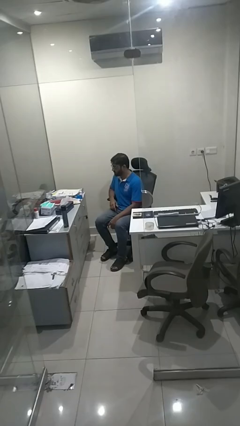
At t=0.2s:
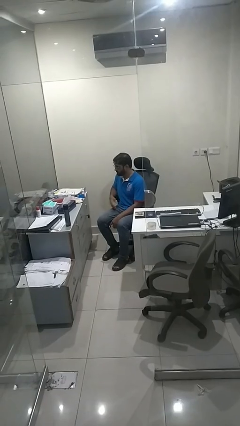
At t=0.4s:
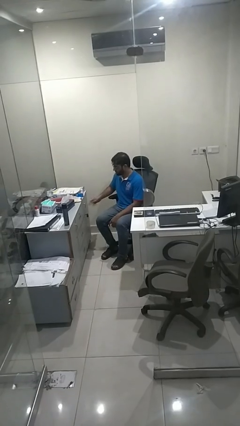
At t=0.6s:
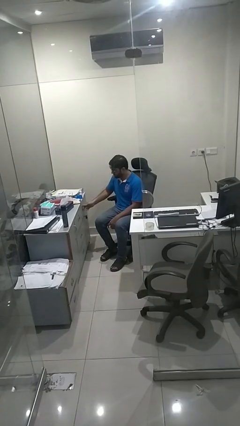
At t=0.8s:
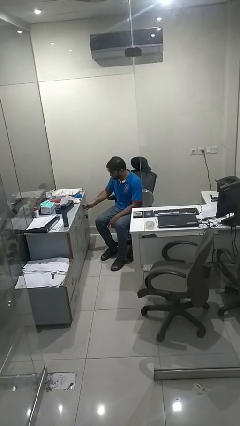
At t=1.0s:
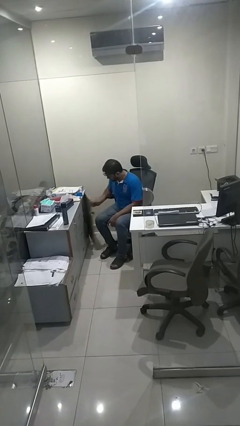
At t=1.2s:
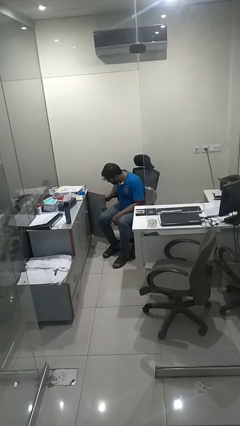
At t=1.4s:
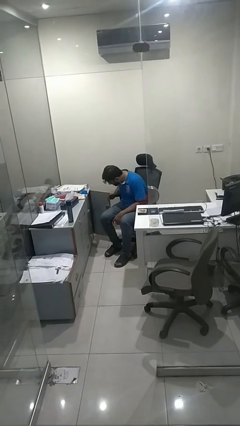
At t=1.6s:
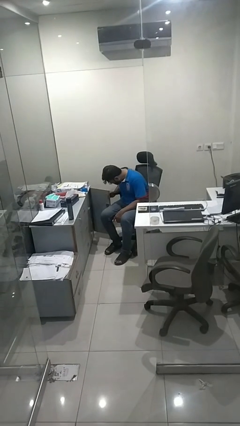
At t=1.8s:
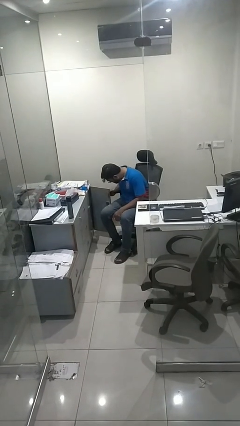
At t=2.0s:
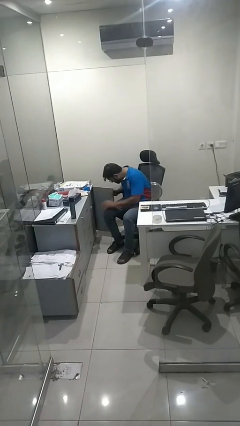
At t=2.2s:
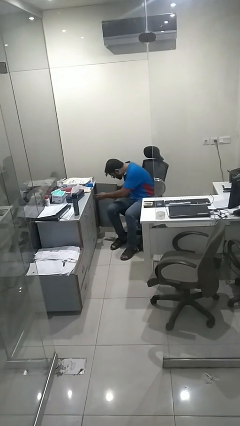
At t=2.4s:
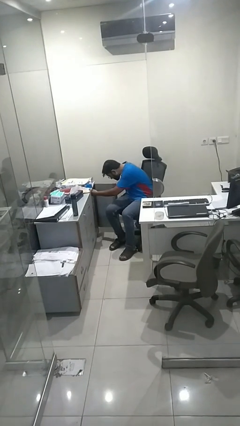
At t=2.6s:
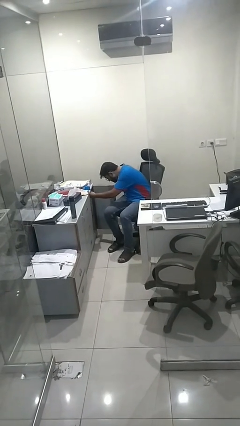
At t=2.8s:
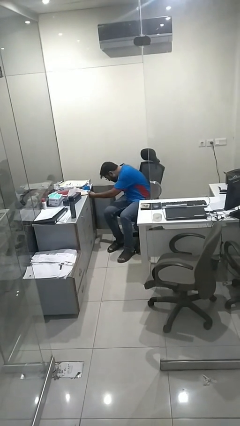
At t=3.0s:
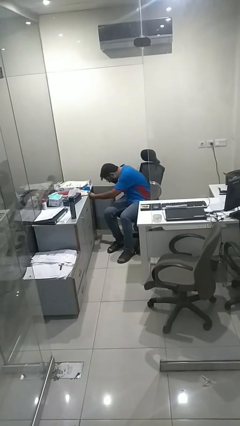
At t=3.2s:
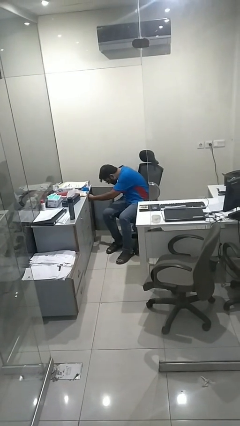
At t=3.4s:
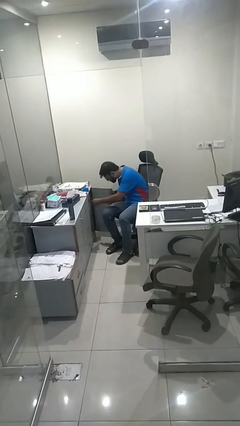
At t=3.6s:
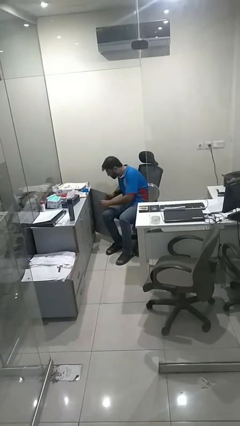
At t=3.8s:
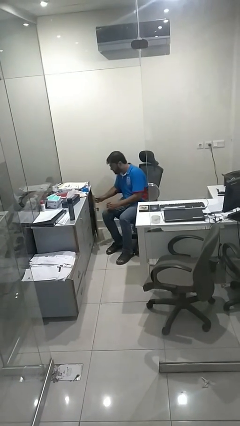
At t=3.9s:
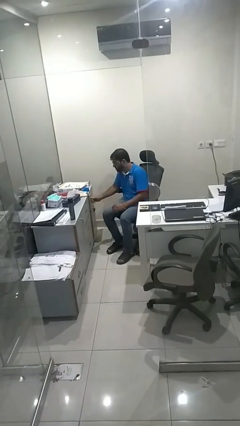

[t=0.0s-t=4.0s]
person searches in cabinet

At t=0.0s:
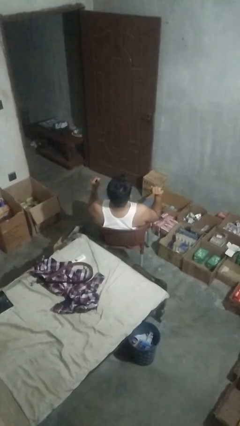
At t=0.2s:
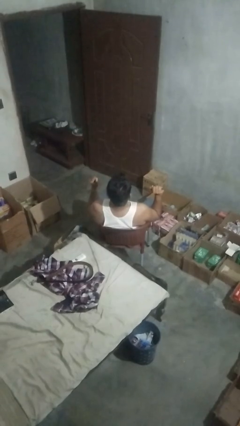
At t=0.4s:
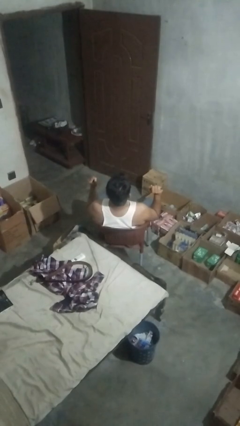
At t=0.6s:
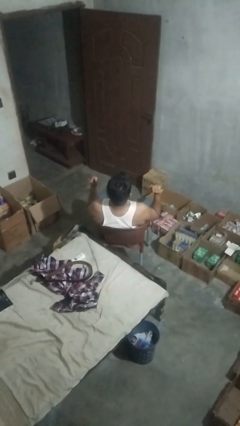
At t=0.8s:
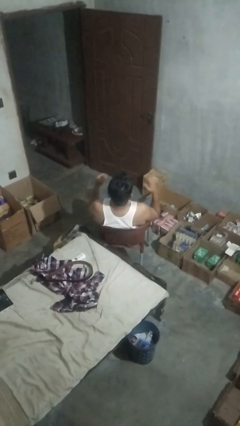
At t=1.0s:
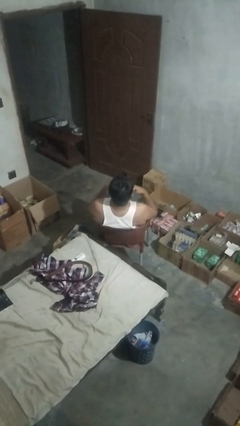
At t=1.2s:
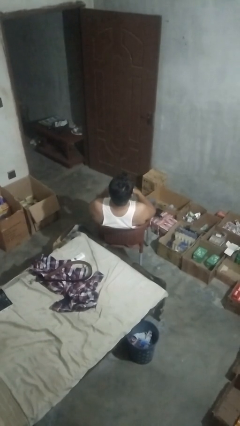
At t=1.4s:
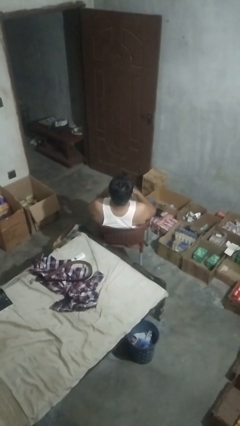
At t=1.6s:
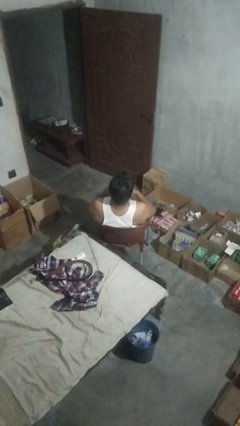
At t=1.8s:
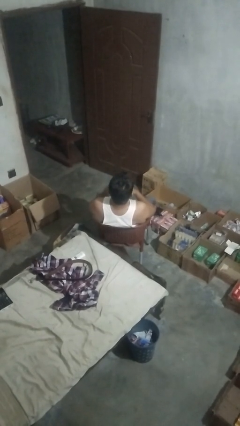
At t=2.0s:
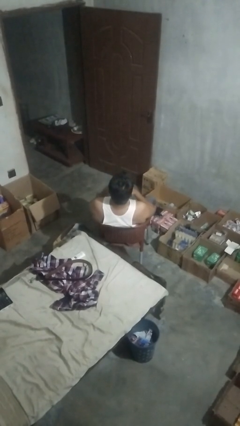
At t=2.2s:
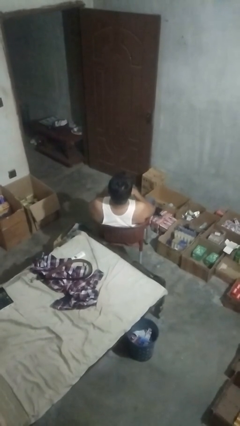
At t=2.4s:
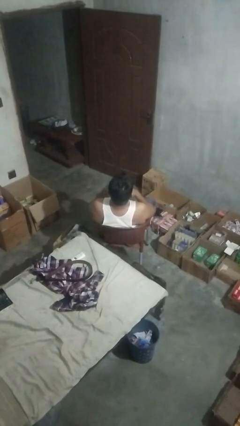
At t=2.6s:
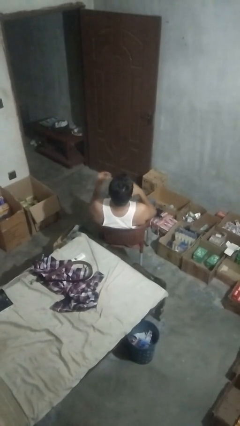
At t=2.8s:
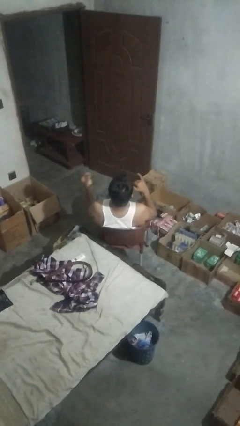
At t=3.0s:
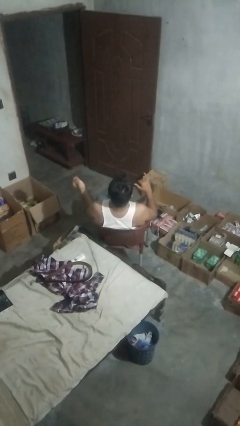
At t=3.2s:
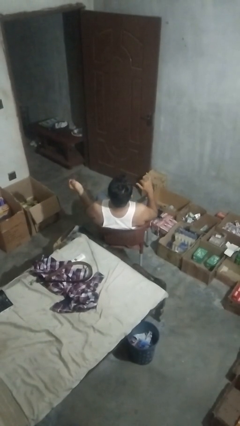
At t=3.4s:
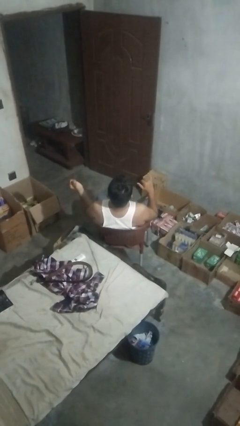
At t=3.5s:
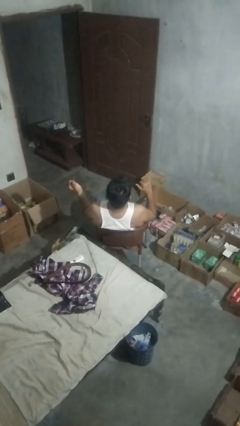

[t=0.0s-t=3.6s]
person takes off ring

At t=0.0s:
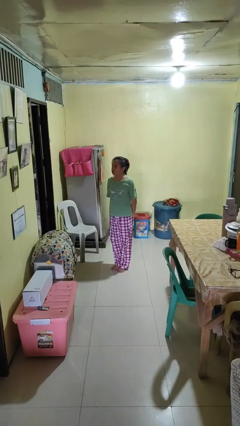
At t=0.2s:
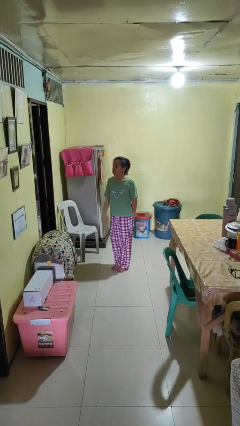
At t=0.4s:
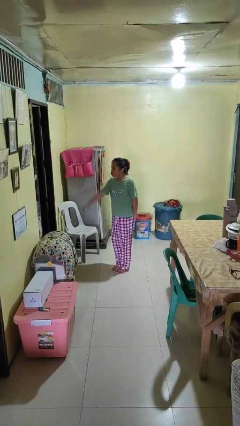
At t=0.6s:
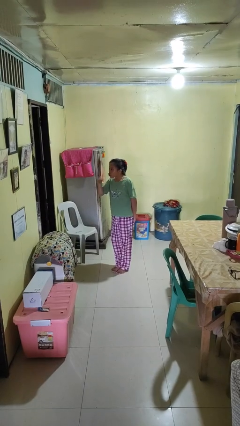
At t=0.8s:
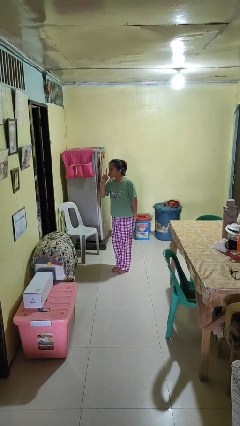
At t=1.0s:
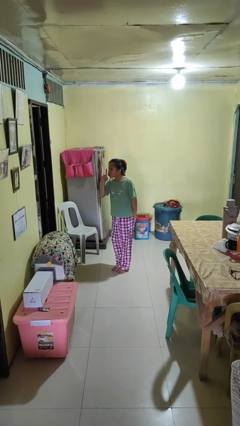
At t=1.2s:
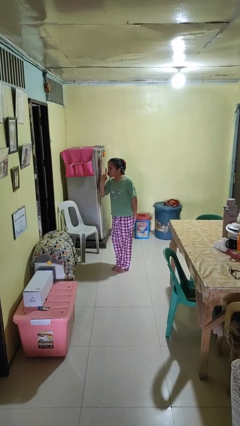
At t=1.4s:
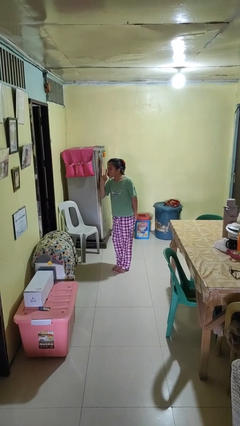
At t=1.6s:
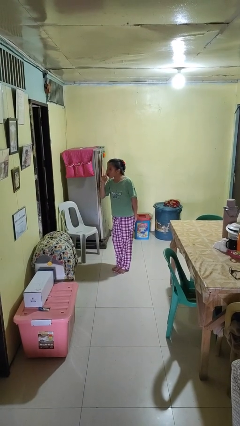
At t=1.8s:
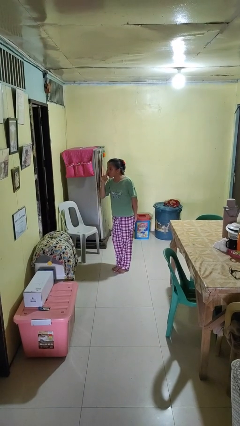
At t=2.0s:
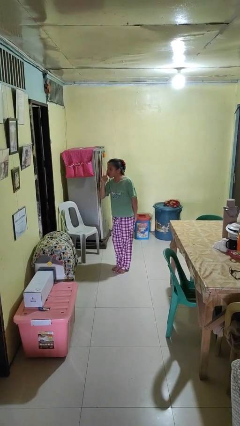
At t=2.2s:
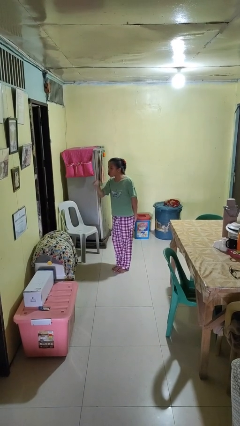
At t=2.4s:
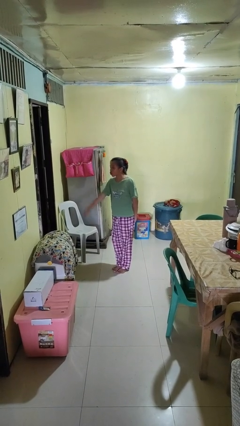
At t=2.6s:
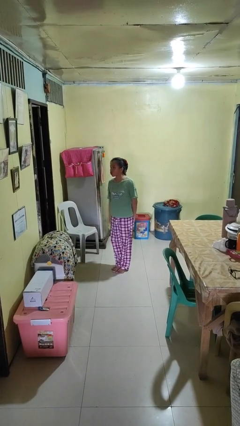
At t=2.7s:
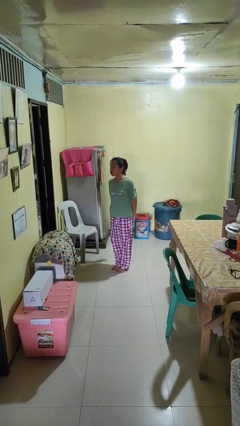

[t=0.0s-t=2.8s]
person gestures be quiet

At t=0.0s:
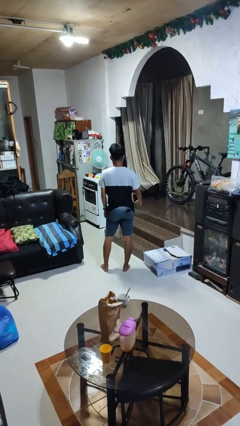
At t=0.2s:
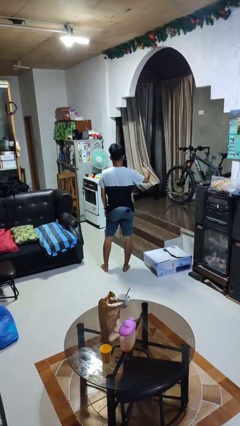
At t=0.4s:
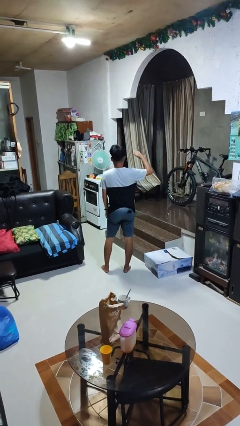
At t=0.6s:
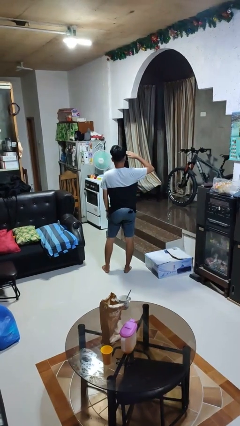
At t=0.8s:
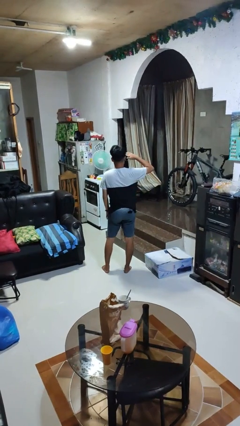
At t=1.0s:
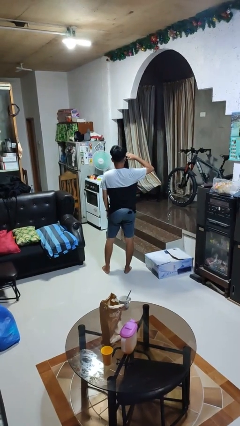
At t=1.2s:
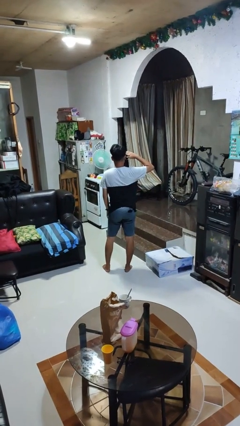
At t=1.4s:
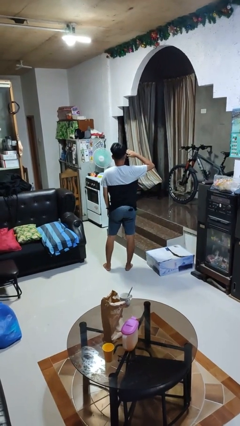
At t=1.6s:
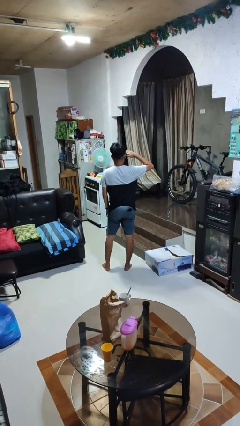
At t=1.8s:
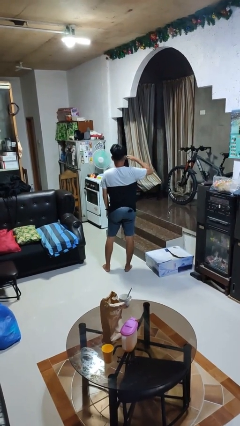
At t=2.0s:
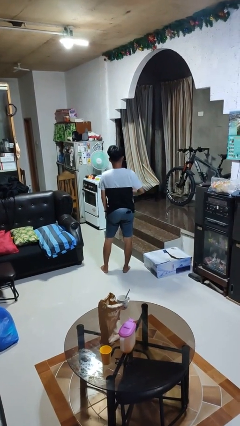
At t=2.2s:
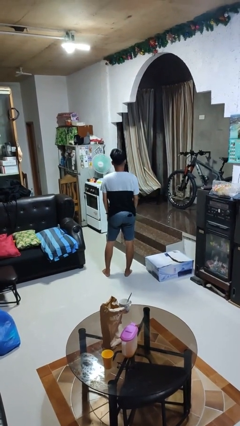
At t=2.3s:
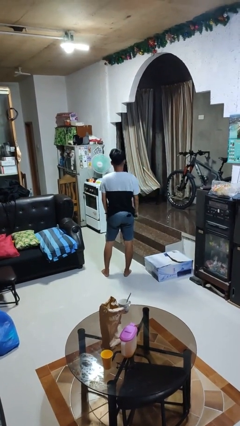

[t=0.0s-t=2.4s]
person salutes

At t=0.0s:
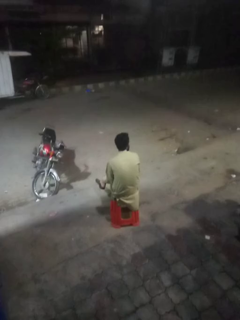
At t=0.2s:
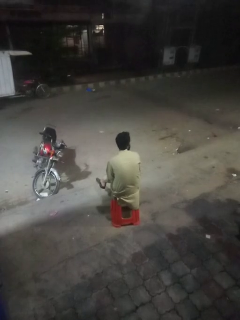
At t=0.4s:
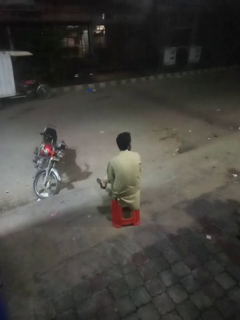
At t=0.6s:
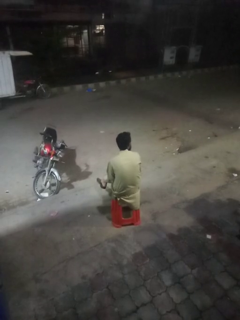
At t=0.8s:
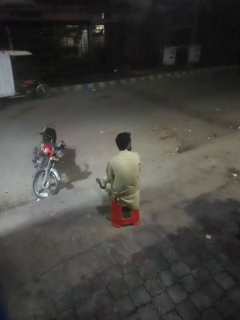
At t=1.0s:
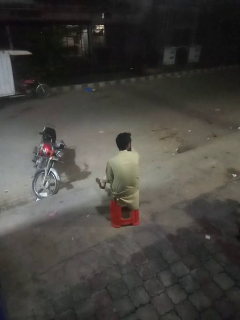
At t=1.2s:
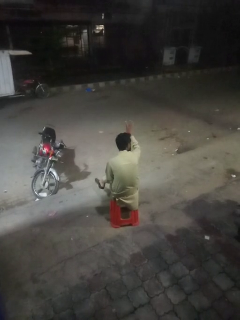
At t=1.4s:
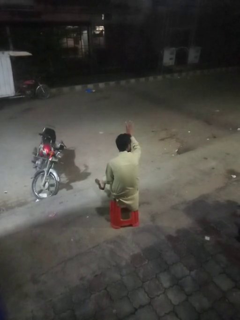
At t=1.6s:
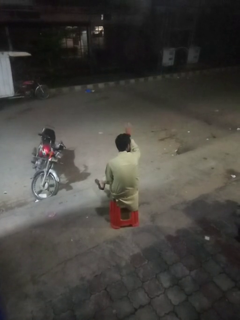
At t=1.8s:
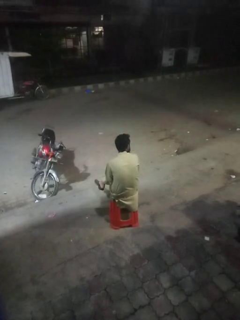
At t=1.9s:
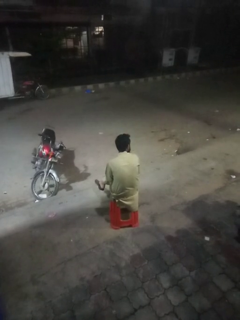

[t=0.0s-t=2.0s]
person gestures number four

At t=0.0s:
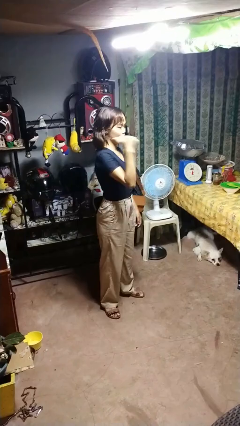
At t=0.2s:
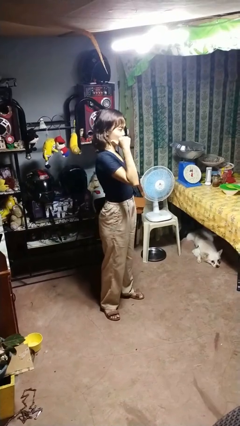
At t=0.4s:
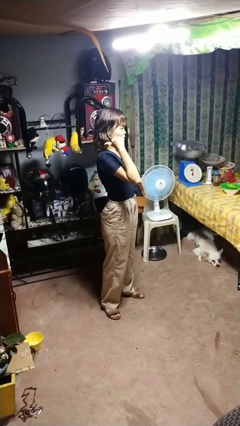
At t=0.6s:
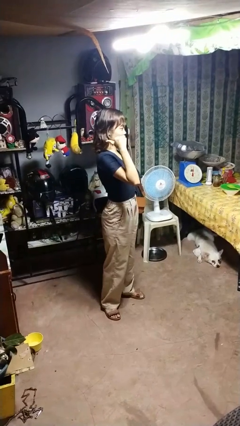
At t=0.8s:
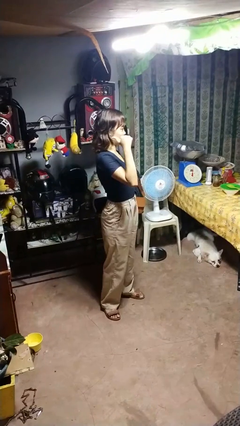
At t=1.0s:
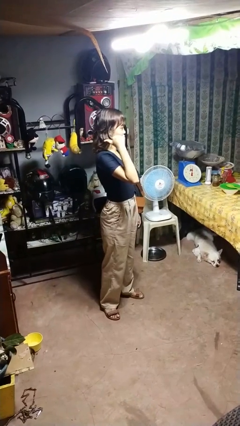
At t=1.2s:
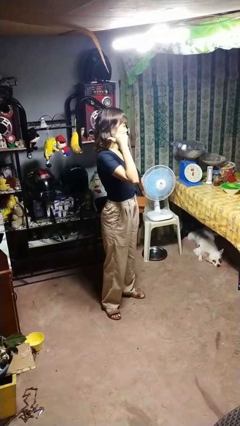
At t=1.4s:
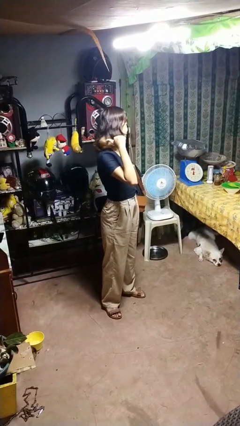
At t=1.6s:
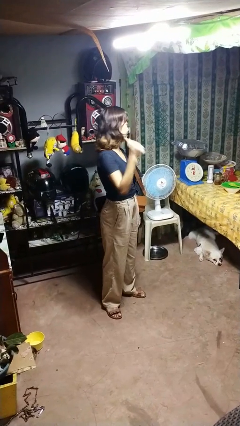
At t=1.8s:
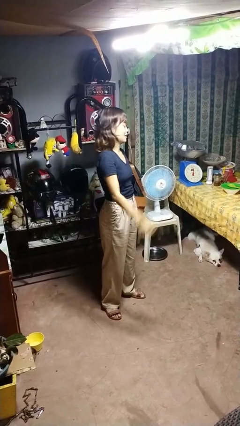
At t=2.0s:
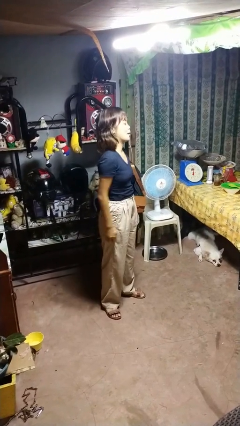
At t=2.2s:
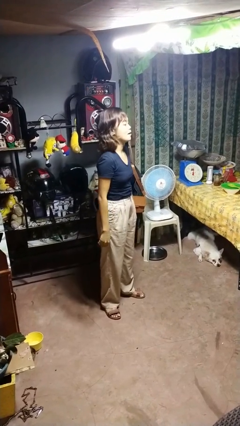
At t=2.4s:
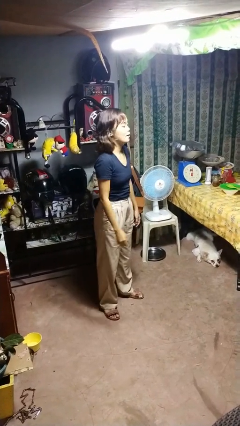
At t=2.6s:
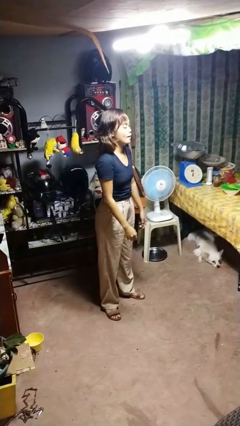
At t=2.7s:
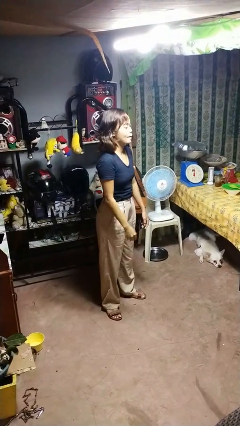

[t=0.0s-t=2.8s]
person gestures behind me

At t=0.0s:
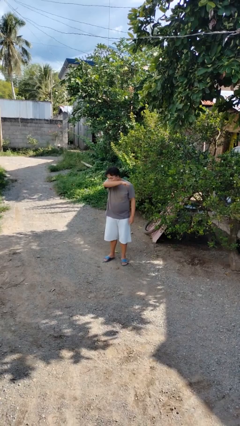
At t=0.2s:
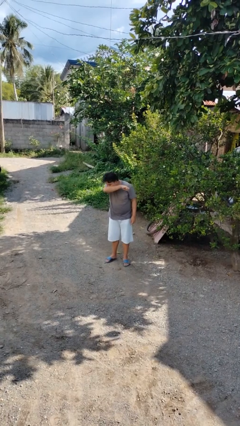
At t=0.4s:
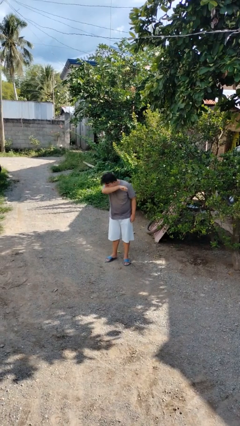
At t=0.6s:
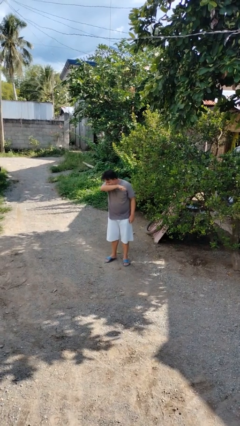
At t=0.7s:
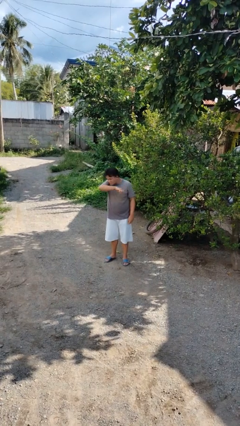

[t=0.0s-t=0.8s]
person sneezes into arm
